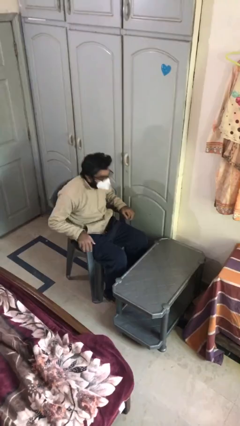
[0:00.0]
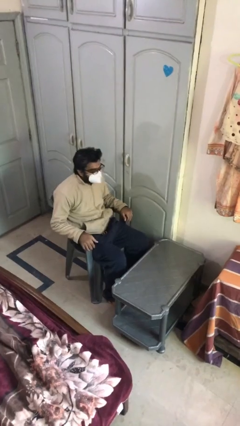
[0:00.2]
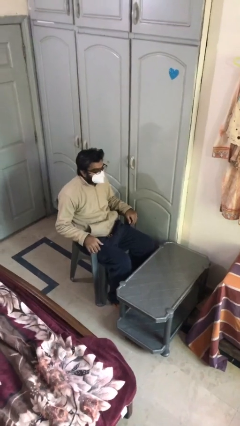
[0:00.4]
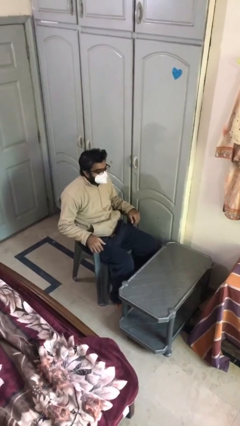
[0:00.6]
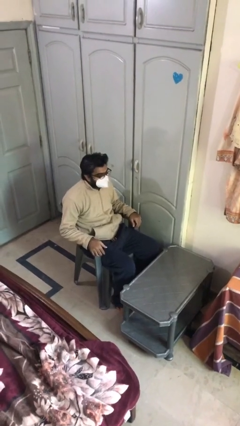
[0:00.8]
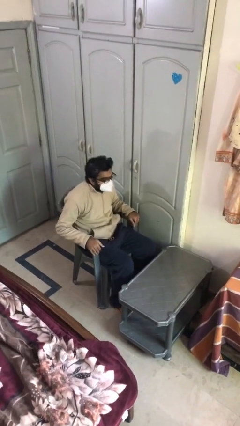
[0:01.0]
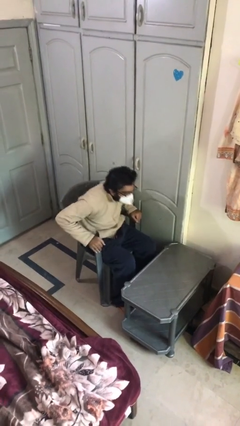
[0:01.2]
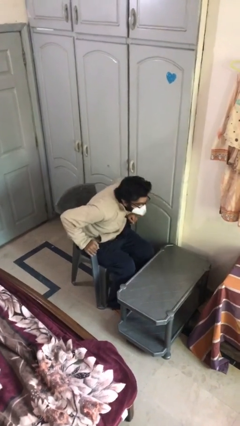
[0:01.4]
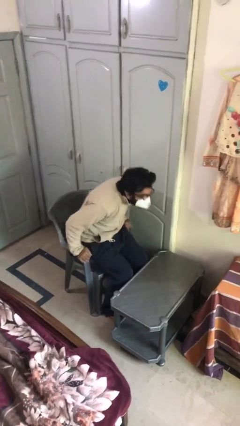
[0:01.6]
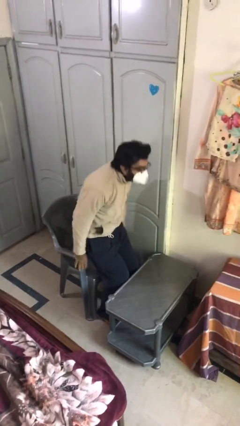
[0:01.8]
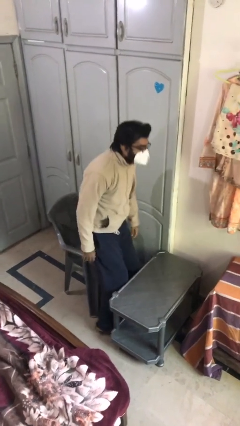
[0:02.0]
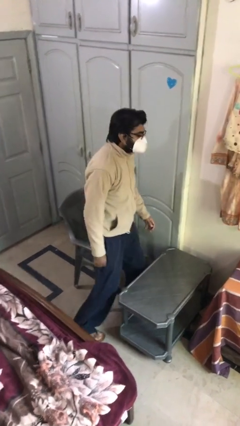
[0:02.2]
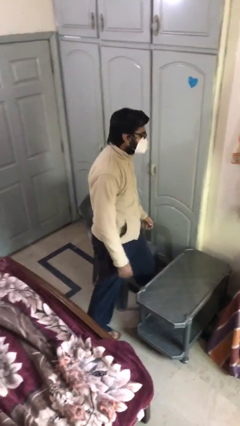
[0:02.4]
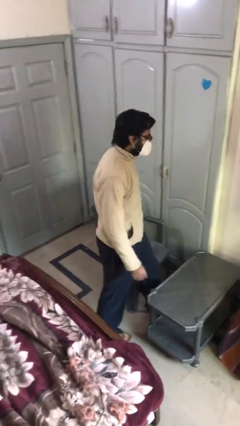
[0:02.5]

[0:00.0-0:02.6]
person stands up

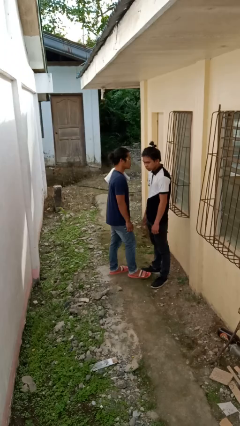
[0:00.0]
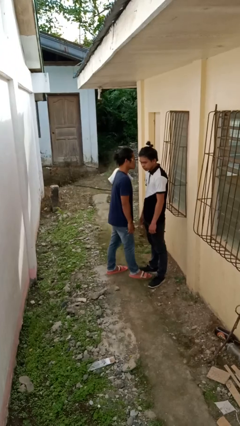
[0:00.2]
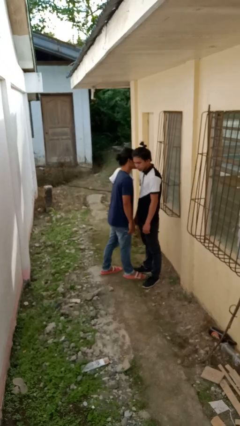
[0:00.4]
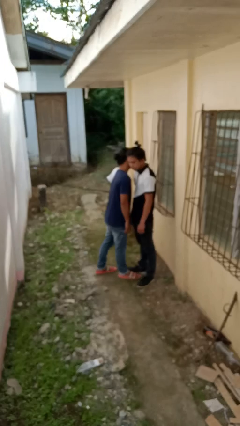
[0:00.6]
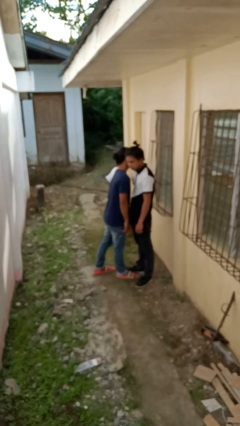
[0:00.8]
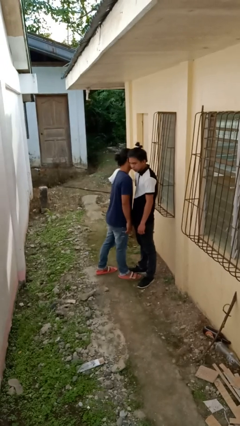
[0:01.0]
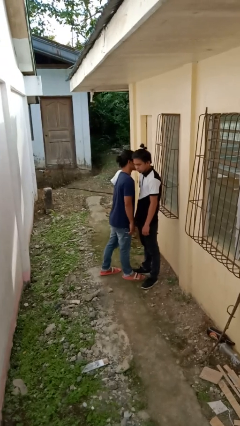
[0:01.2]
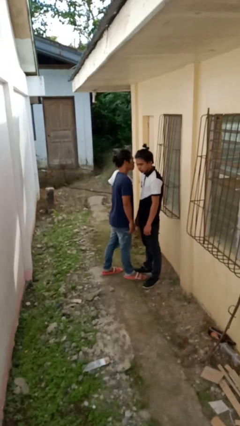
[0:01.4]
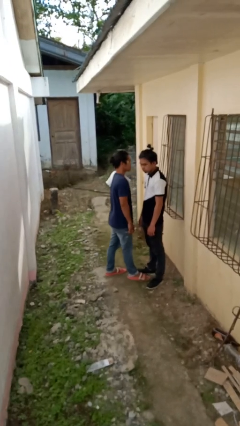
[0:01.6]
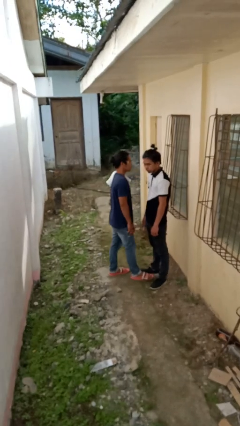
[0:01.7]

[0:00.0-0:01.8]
person kisses cheek of person

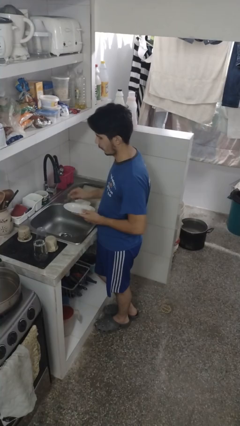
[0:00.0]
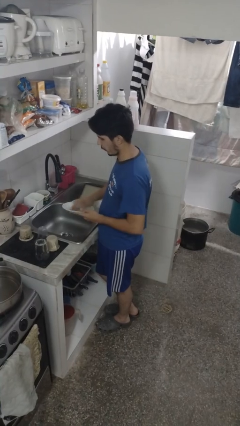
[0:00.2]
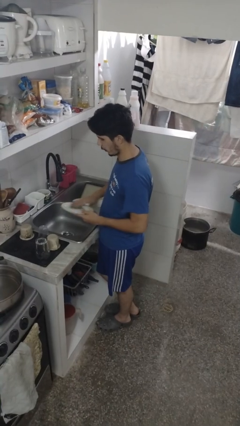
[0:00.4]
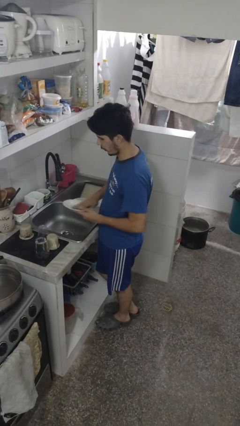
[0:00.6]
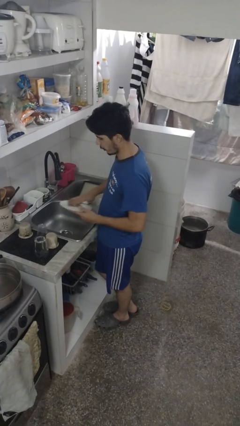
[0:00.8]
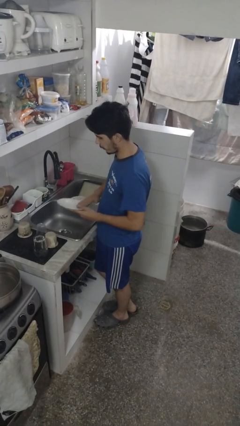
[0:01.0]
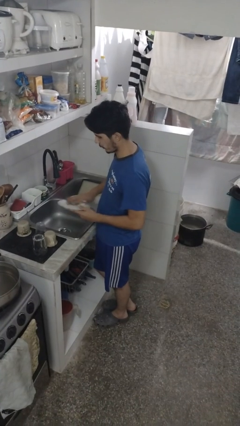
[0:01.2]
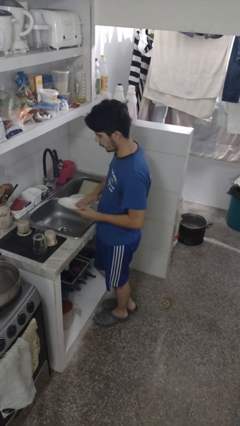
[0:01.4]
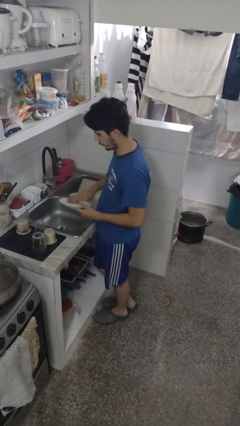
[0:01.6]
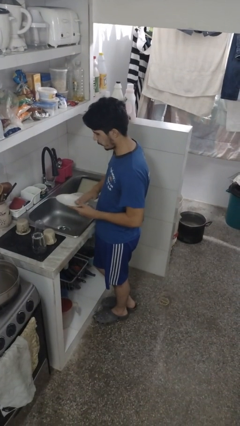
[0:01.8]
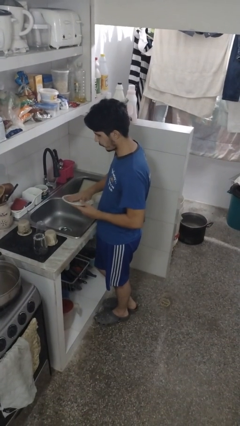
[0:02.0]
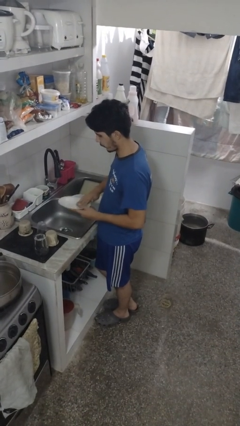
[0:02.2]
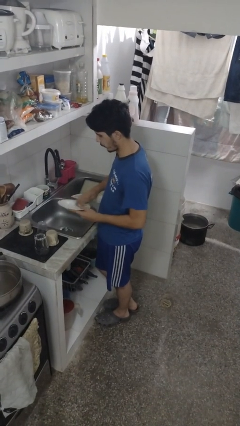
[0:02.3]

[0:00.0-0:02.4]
person washes dish

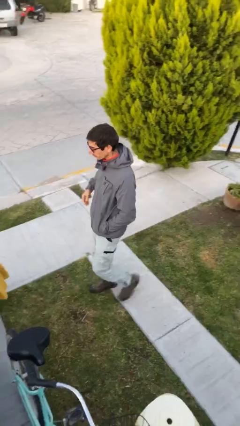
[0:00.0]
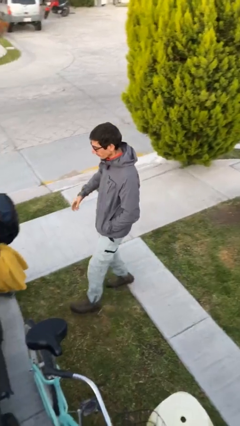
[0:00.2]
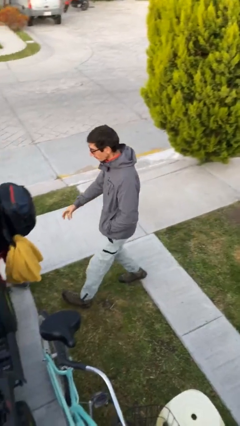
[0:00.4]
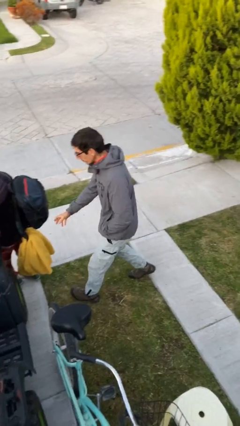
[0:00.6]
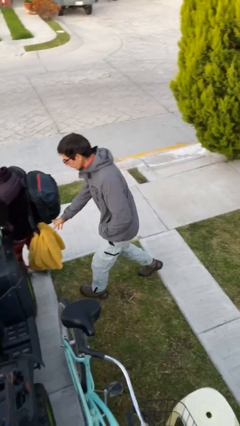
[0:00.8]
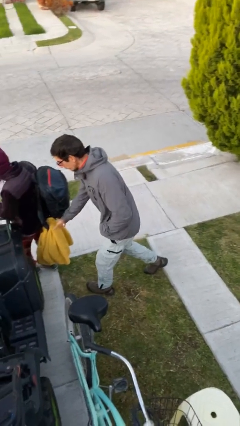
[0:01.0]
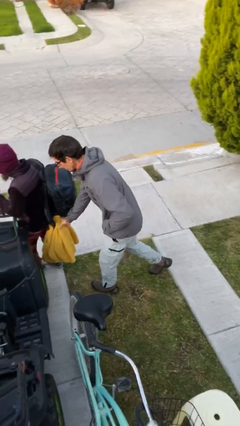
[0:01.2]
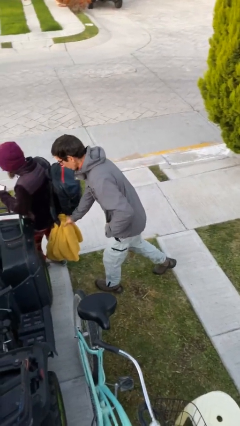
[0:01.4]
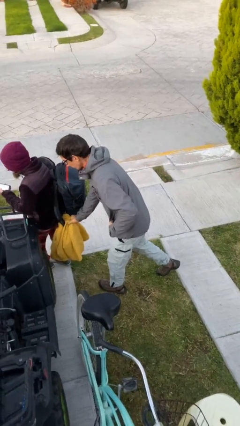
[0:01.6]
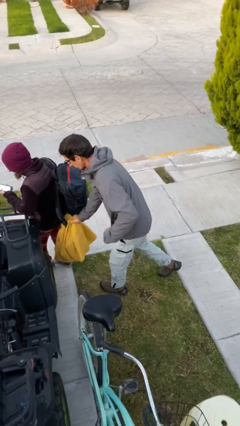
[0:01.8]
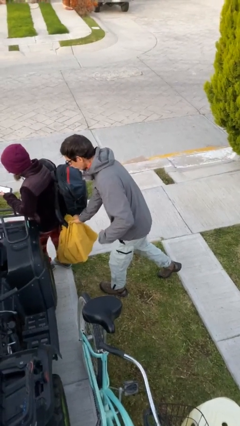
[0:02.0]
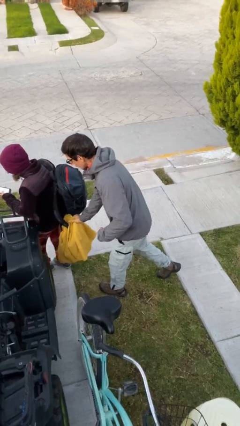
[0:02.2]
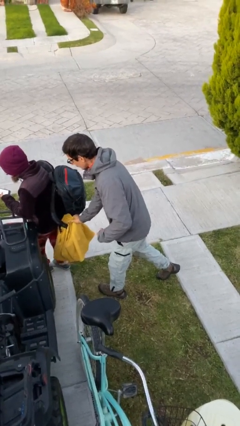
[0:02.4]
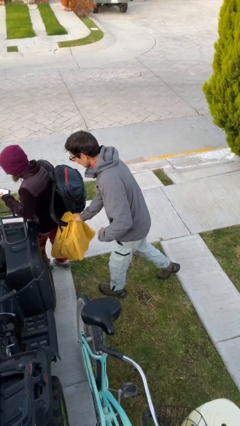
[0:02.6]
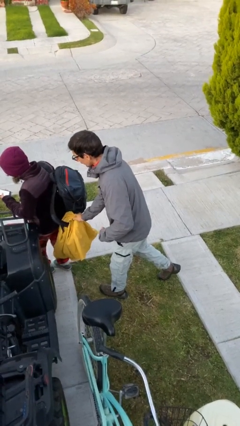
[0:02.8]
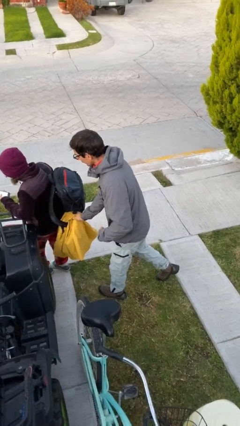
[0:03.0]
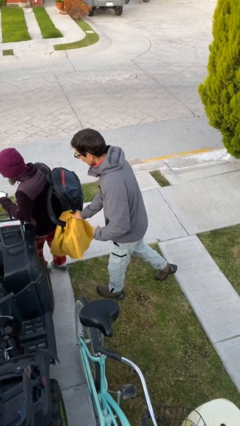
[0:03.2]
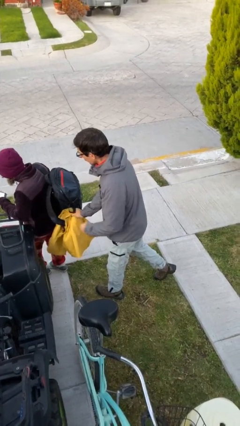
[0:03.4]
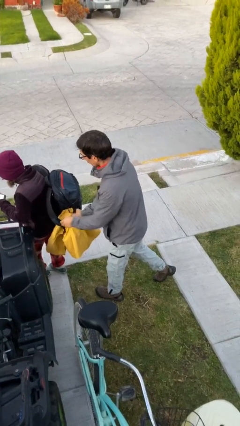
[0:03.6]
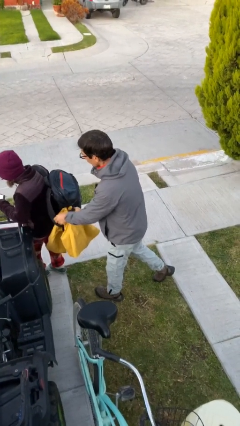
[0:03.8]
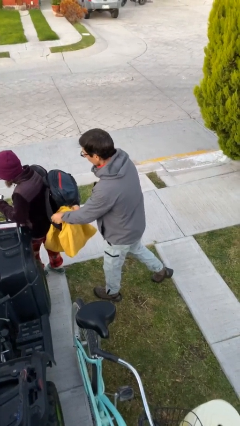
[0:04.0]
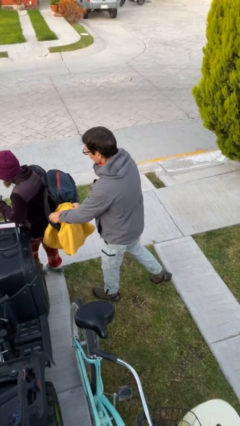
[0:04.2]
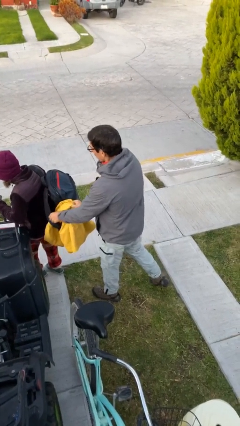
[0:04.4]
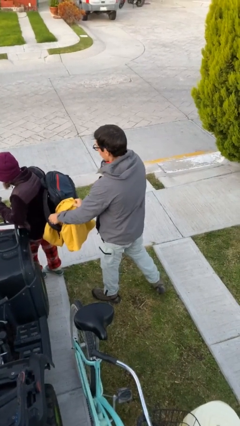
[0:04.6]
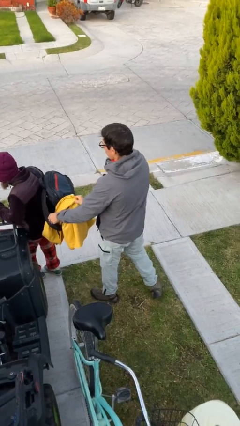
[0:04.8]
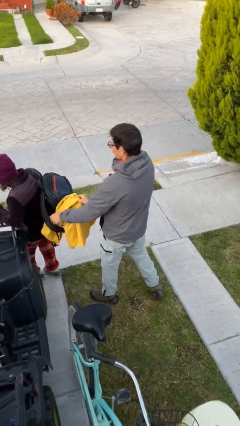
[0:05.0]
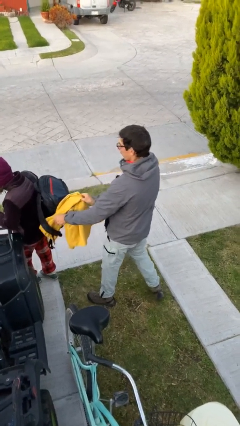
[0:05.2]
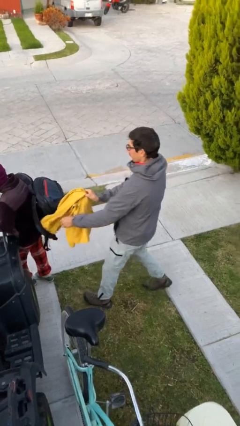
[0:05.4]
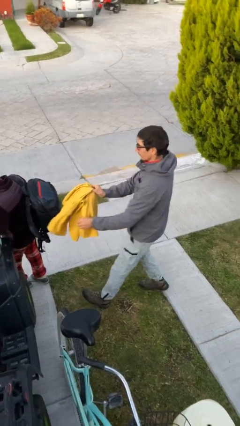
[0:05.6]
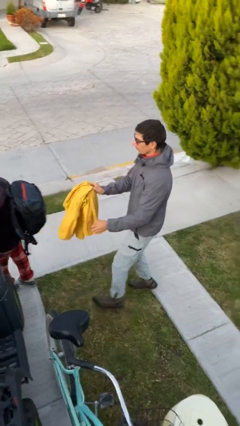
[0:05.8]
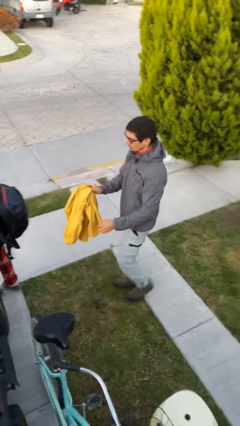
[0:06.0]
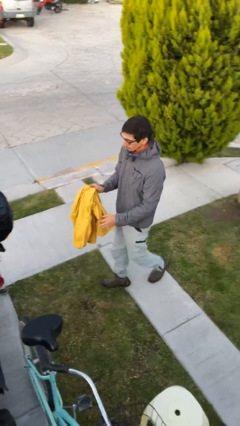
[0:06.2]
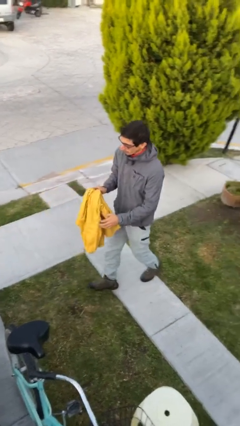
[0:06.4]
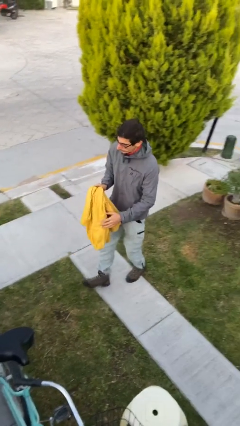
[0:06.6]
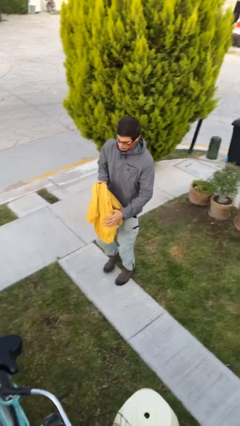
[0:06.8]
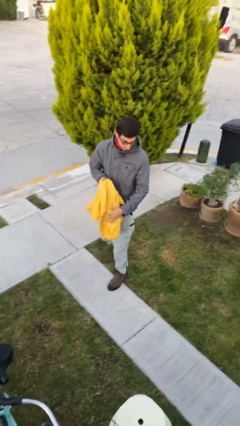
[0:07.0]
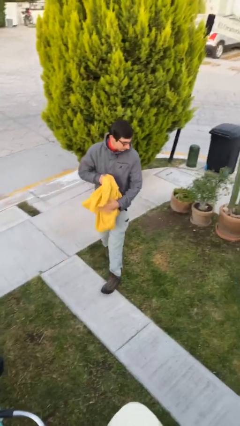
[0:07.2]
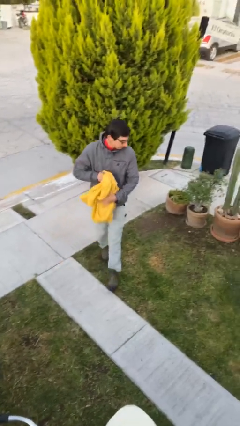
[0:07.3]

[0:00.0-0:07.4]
person steals object from person

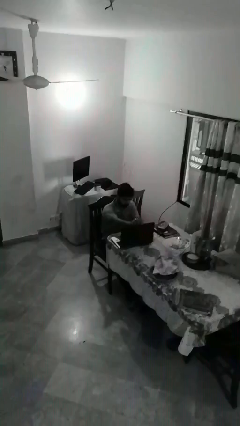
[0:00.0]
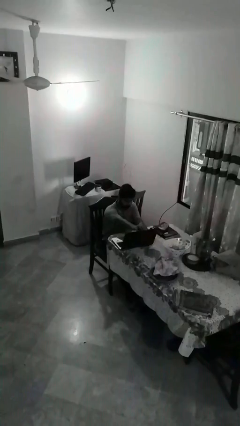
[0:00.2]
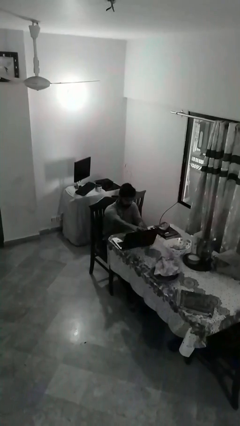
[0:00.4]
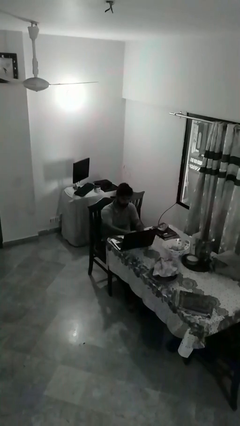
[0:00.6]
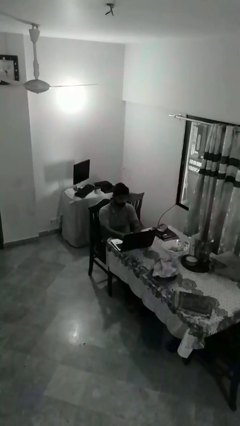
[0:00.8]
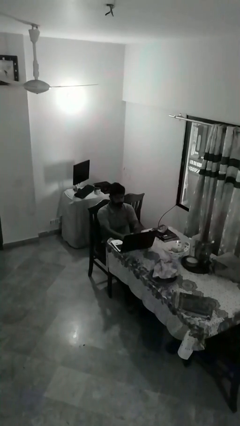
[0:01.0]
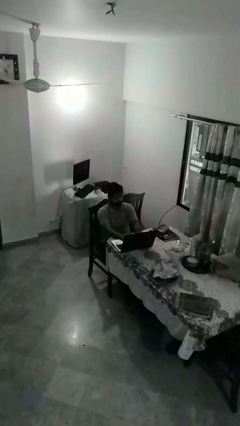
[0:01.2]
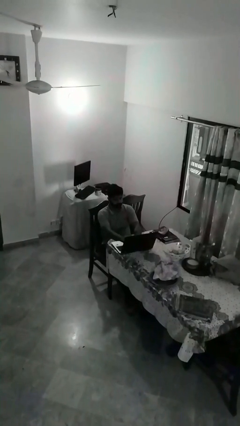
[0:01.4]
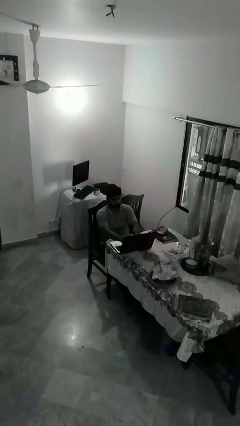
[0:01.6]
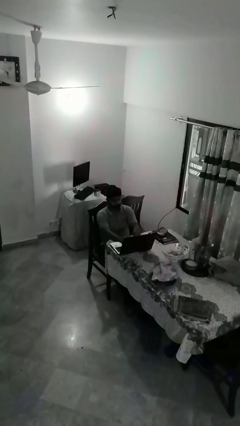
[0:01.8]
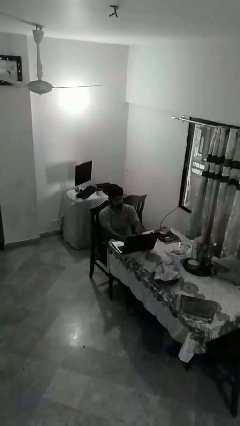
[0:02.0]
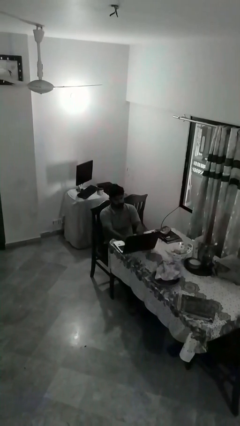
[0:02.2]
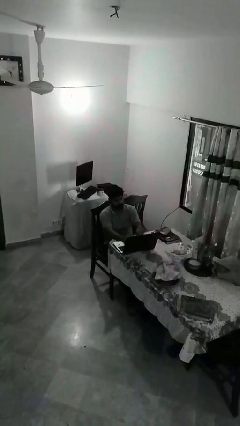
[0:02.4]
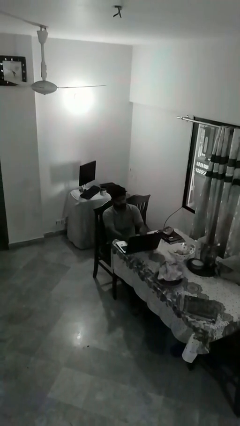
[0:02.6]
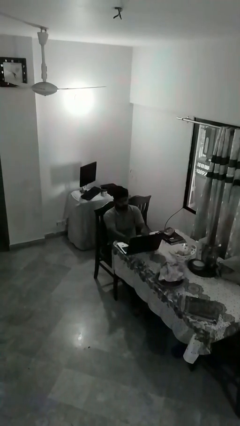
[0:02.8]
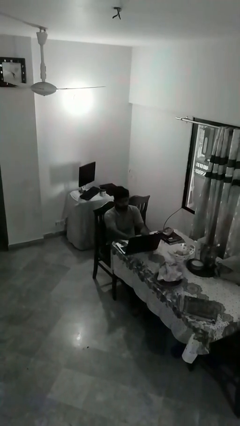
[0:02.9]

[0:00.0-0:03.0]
person interacts with laptop

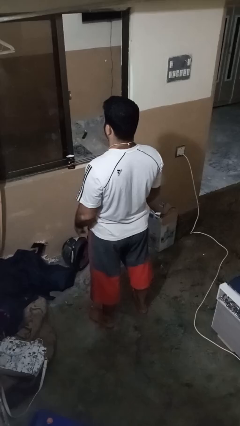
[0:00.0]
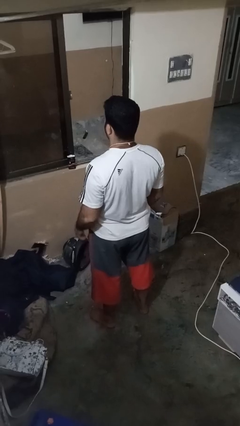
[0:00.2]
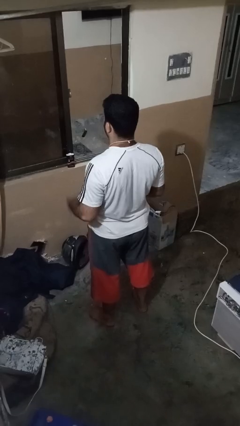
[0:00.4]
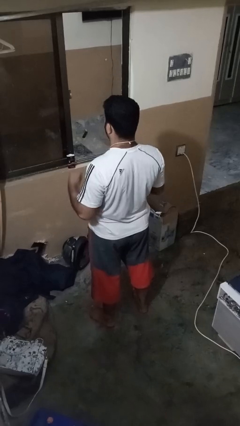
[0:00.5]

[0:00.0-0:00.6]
person takes off necklace
